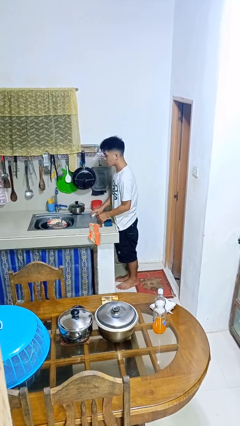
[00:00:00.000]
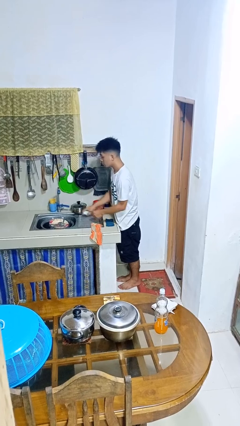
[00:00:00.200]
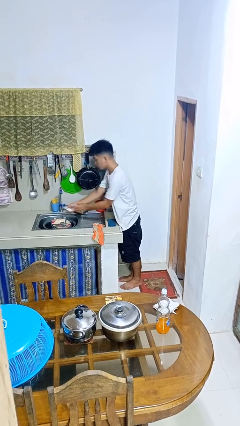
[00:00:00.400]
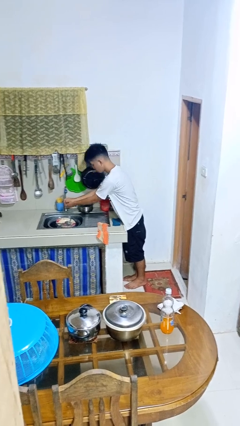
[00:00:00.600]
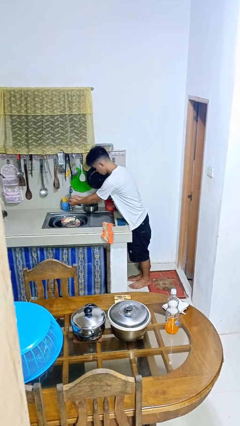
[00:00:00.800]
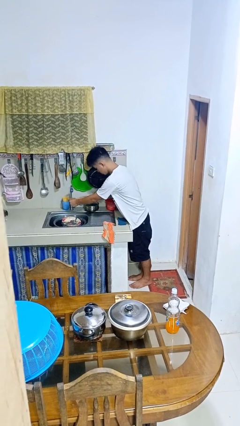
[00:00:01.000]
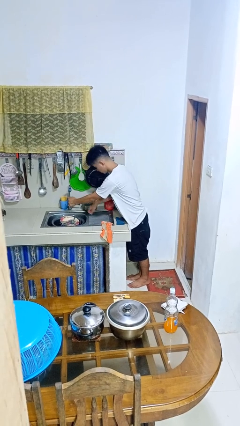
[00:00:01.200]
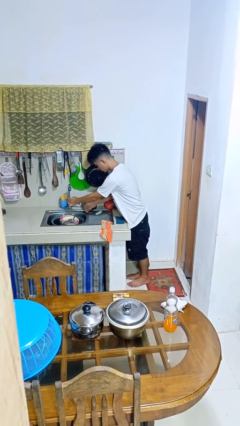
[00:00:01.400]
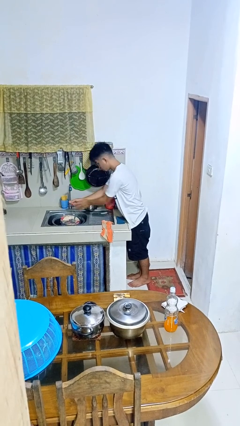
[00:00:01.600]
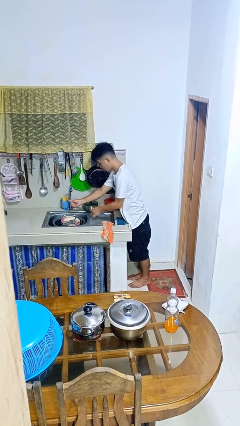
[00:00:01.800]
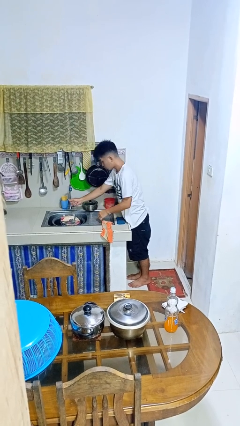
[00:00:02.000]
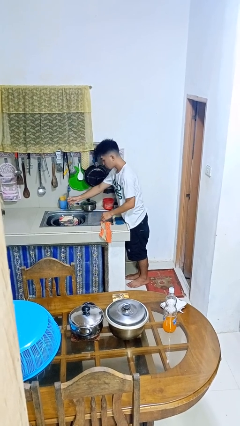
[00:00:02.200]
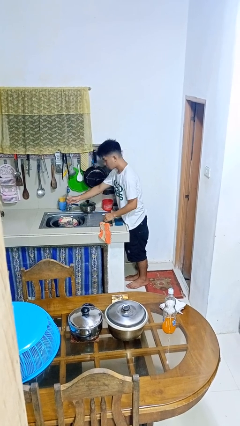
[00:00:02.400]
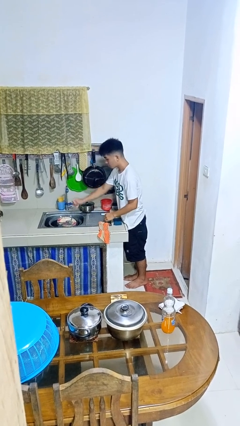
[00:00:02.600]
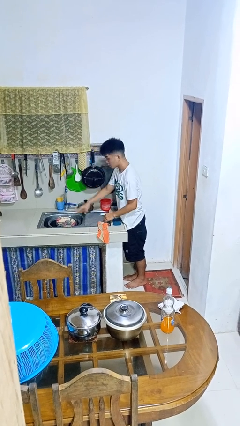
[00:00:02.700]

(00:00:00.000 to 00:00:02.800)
person washes hands

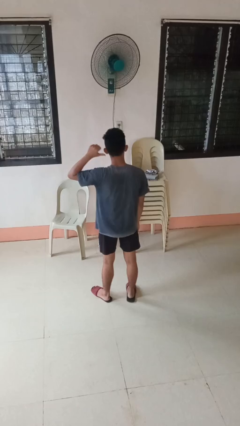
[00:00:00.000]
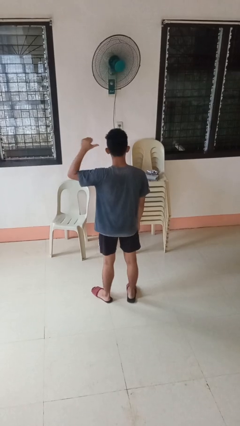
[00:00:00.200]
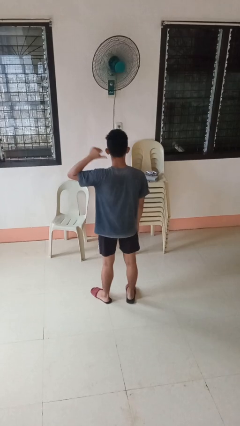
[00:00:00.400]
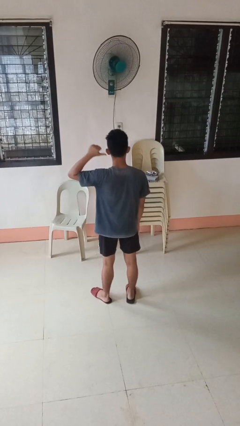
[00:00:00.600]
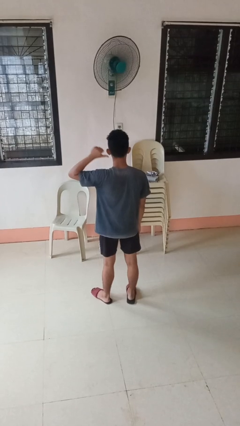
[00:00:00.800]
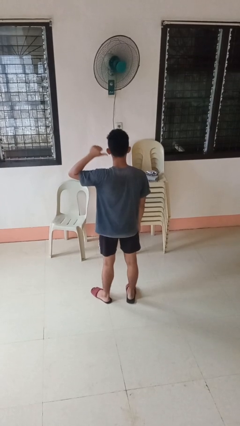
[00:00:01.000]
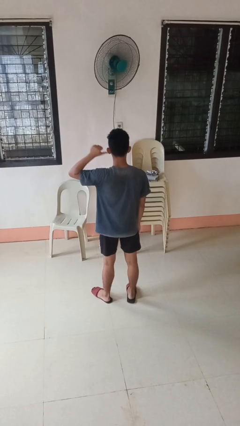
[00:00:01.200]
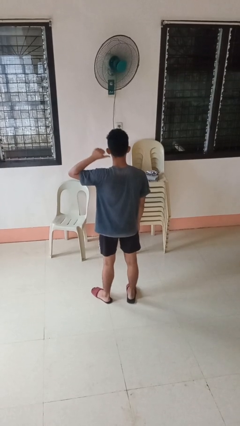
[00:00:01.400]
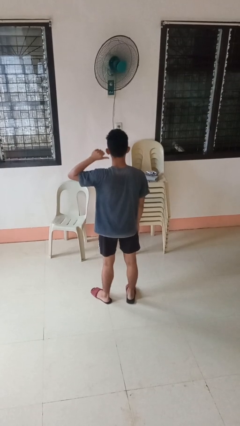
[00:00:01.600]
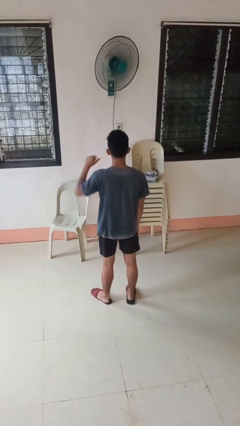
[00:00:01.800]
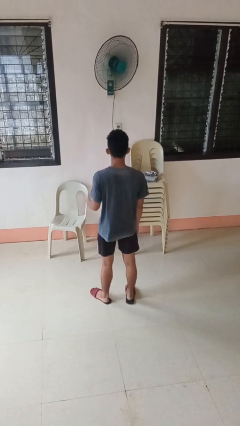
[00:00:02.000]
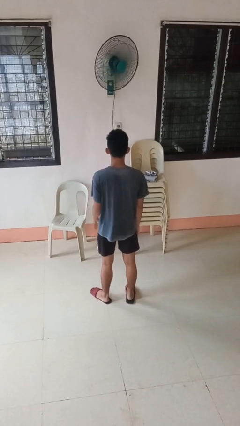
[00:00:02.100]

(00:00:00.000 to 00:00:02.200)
person gestures behind me

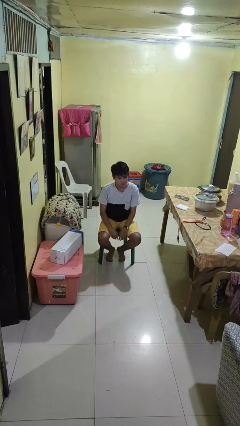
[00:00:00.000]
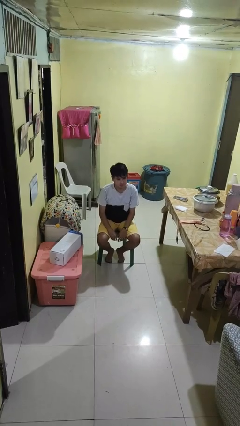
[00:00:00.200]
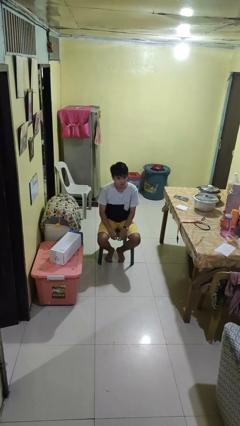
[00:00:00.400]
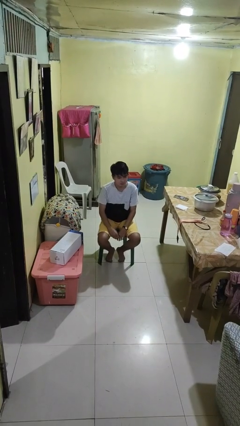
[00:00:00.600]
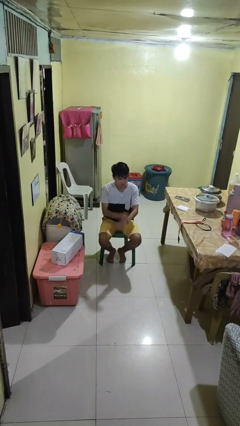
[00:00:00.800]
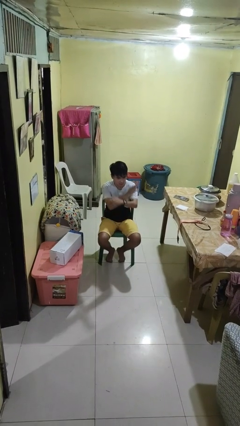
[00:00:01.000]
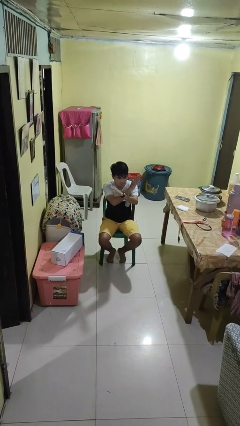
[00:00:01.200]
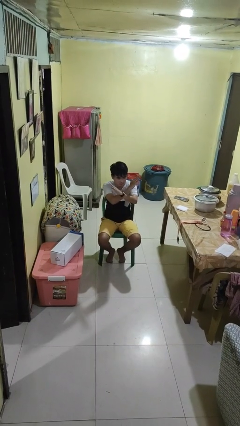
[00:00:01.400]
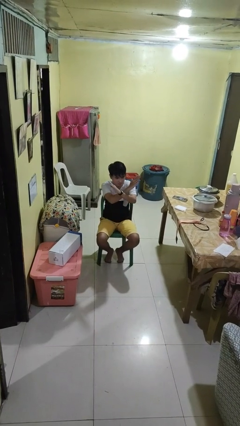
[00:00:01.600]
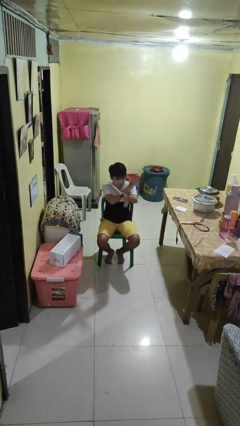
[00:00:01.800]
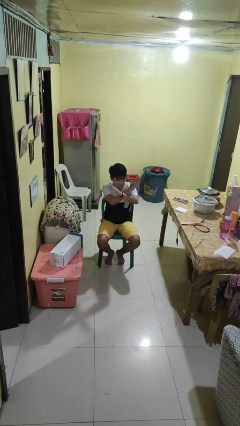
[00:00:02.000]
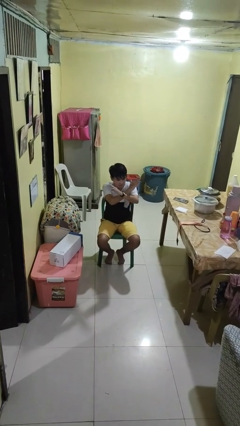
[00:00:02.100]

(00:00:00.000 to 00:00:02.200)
person gestures arms x

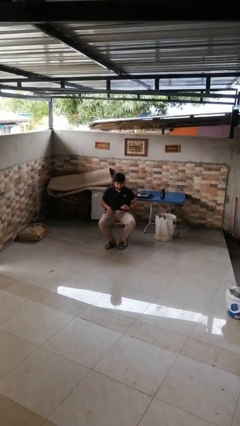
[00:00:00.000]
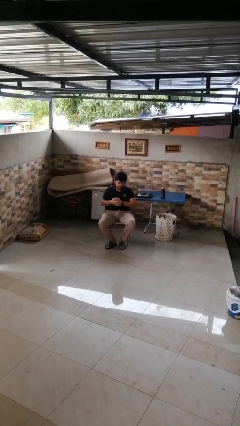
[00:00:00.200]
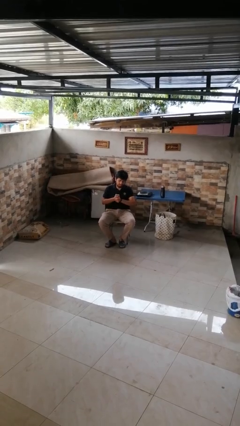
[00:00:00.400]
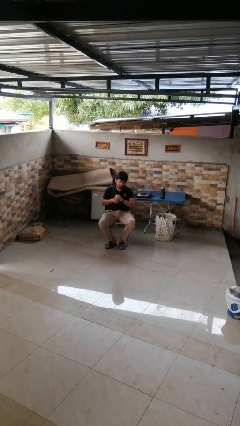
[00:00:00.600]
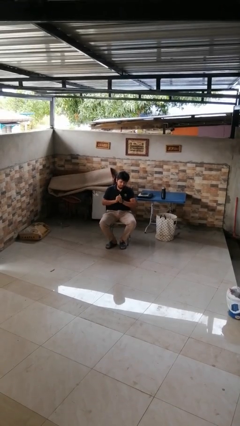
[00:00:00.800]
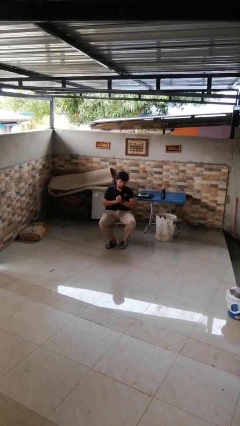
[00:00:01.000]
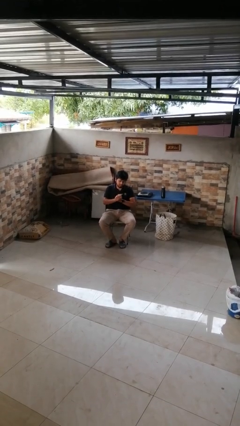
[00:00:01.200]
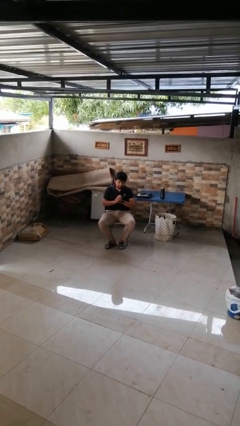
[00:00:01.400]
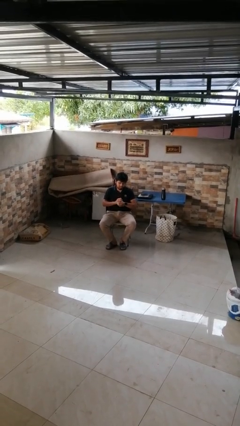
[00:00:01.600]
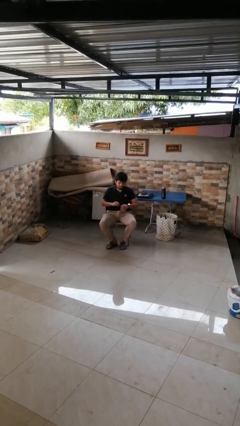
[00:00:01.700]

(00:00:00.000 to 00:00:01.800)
person cracks knuckles

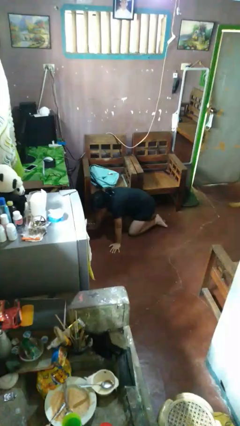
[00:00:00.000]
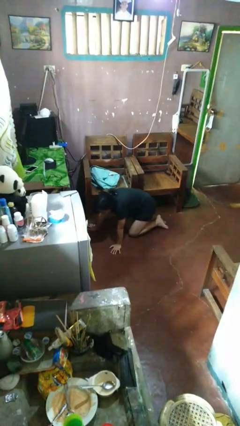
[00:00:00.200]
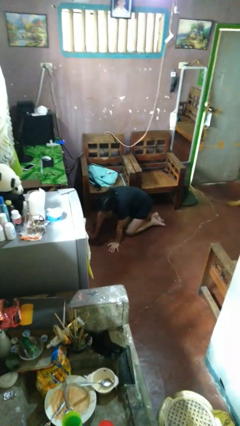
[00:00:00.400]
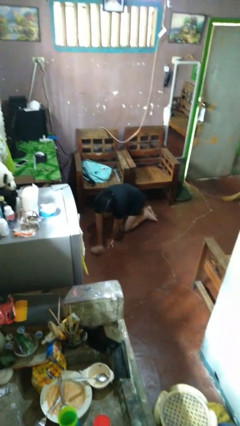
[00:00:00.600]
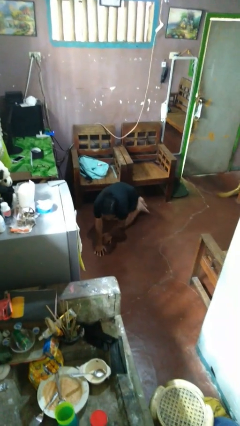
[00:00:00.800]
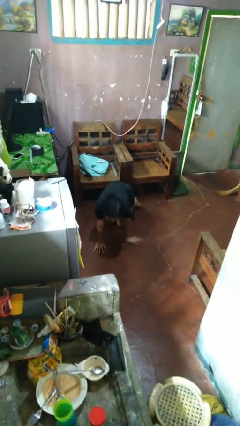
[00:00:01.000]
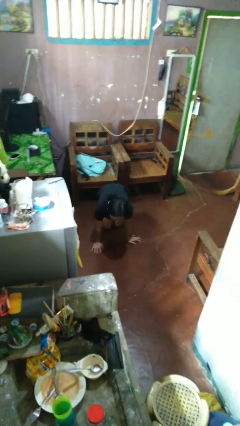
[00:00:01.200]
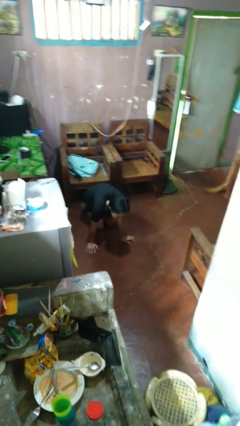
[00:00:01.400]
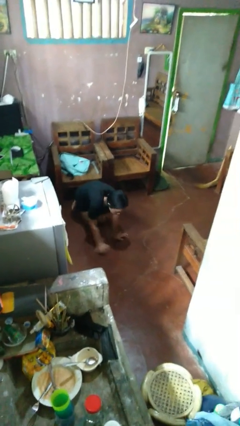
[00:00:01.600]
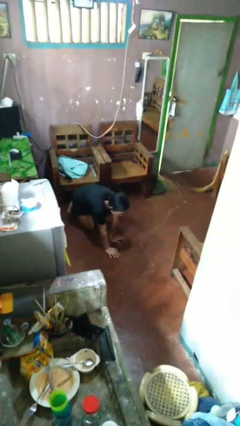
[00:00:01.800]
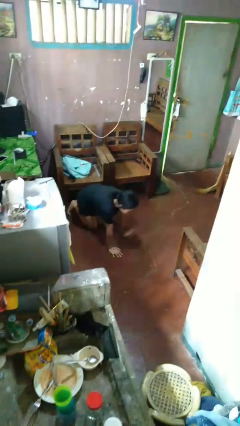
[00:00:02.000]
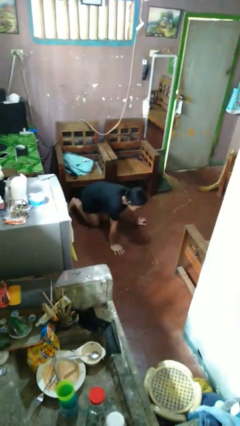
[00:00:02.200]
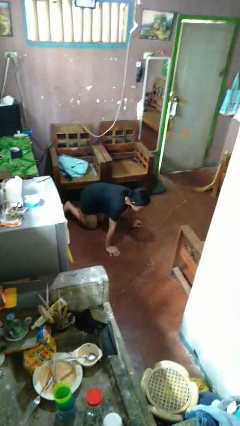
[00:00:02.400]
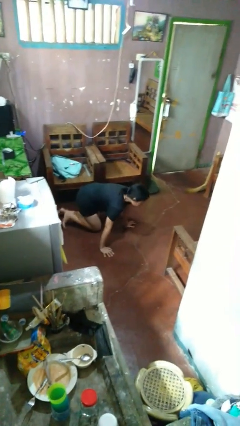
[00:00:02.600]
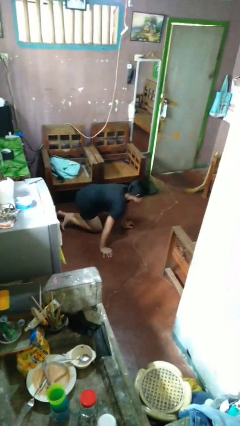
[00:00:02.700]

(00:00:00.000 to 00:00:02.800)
person crawls

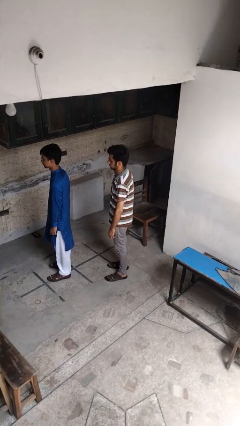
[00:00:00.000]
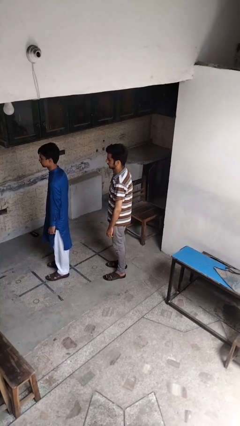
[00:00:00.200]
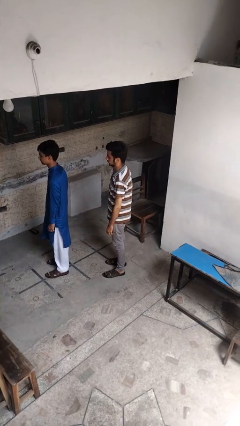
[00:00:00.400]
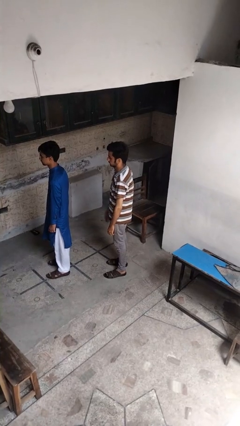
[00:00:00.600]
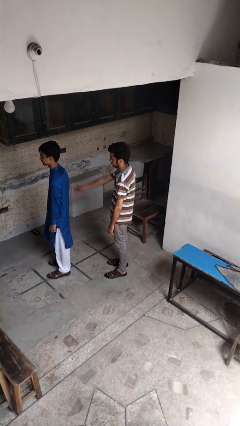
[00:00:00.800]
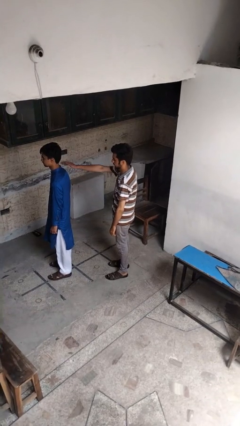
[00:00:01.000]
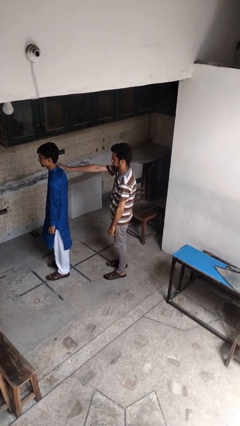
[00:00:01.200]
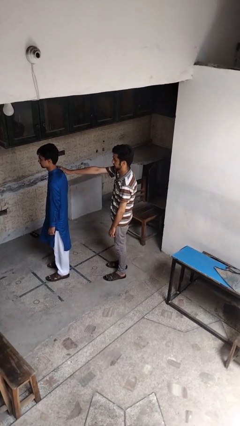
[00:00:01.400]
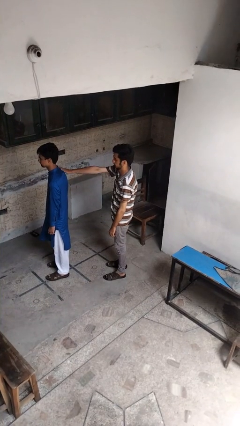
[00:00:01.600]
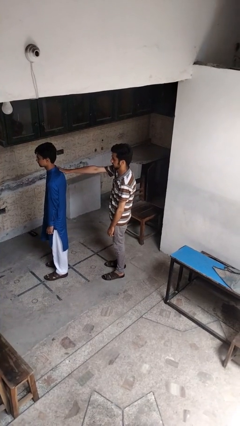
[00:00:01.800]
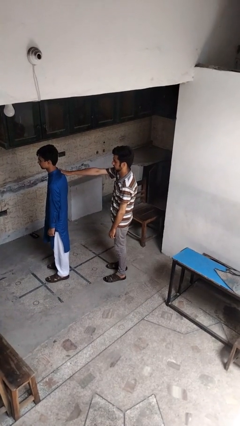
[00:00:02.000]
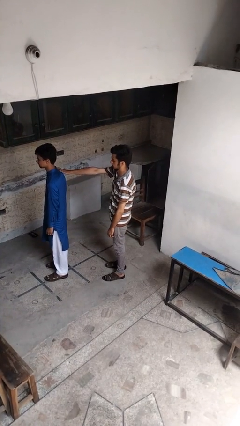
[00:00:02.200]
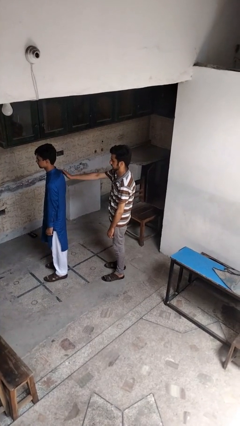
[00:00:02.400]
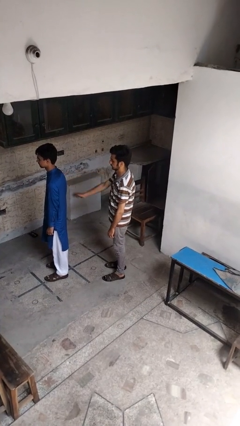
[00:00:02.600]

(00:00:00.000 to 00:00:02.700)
person touches back of person

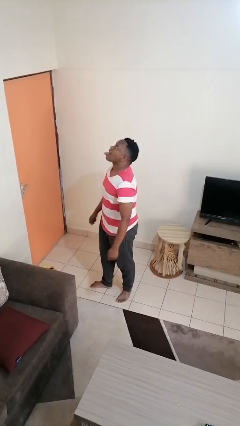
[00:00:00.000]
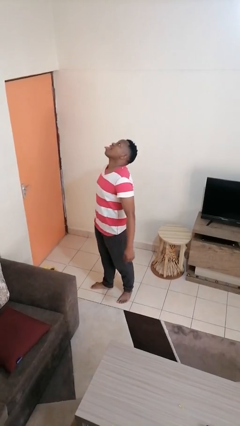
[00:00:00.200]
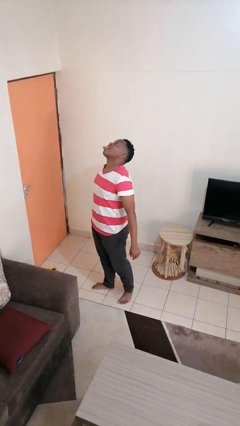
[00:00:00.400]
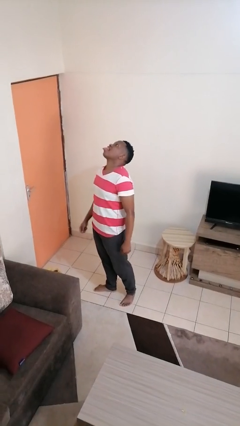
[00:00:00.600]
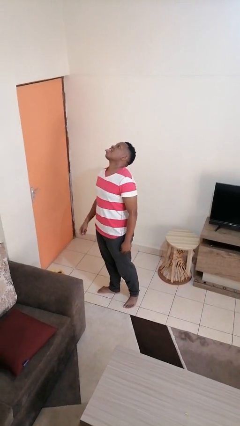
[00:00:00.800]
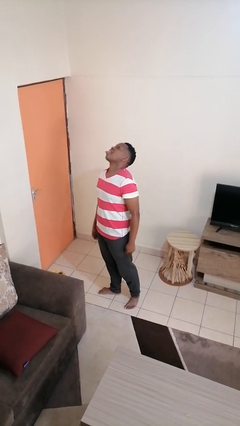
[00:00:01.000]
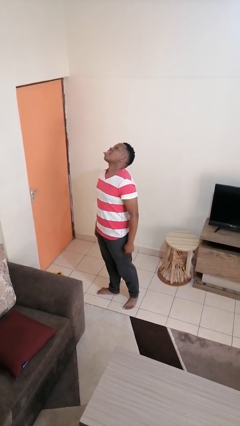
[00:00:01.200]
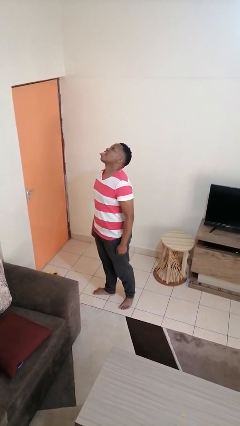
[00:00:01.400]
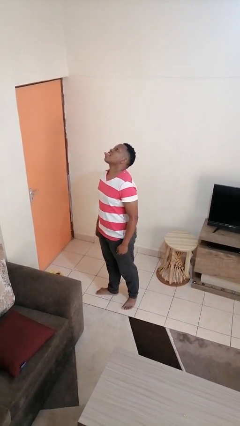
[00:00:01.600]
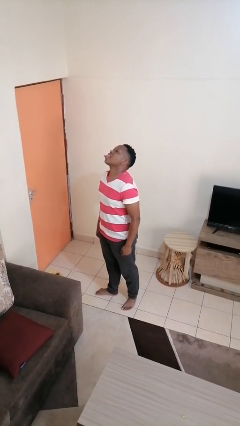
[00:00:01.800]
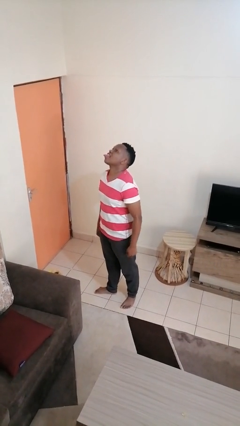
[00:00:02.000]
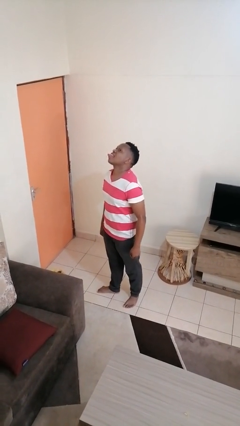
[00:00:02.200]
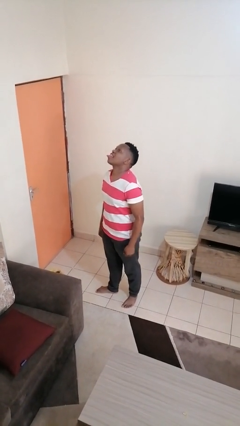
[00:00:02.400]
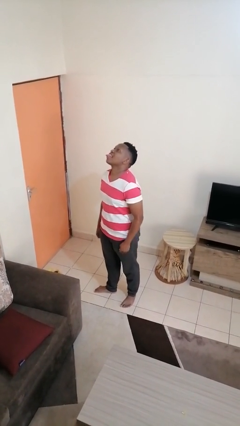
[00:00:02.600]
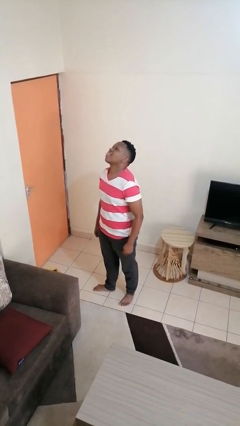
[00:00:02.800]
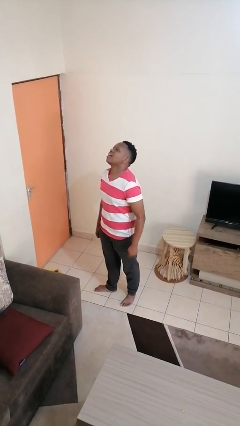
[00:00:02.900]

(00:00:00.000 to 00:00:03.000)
person sticks out tongue
